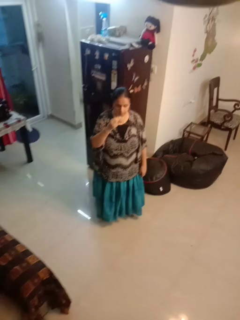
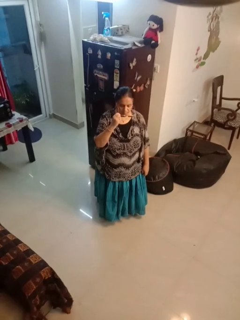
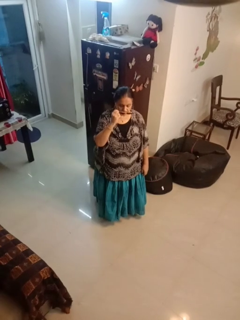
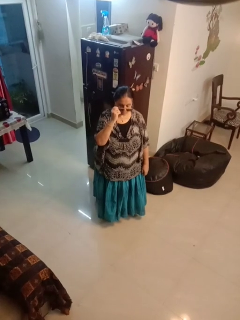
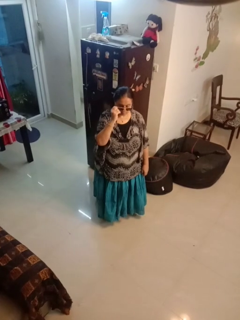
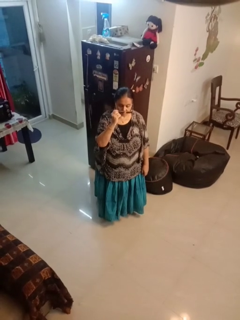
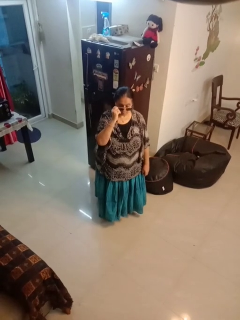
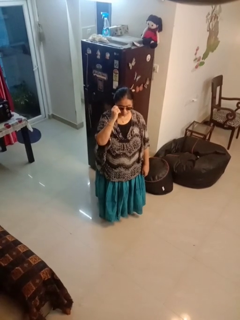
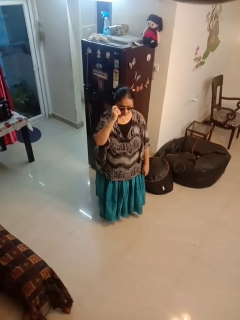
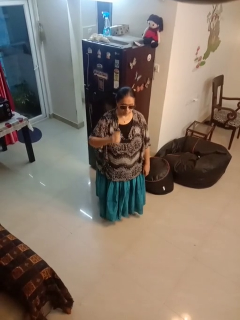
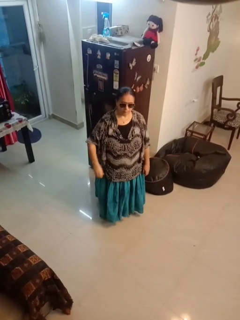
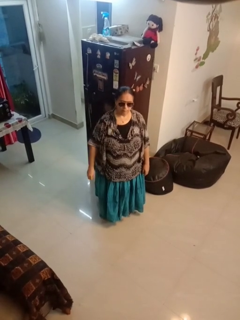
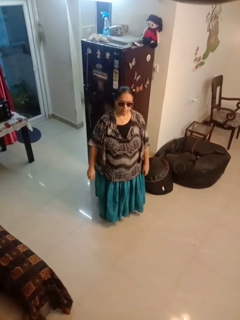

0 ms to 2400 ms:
person puts on sunglasses

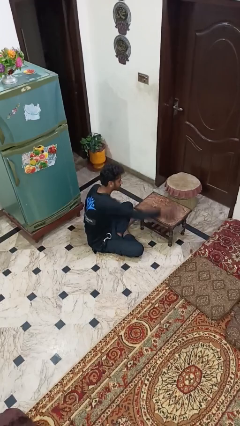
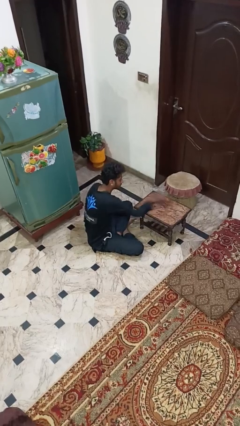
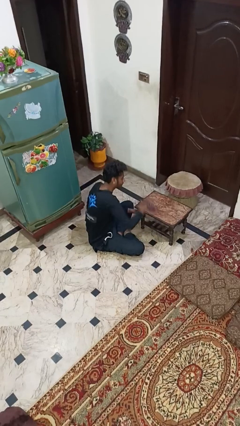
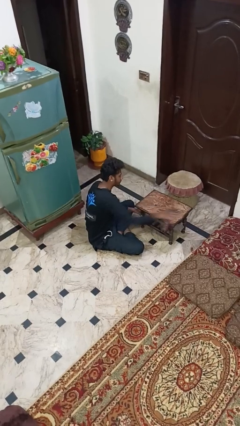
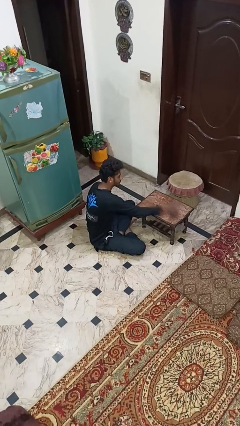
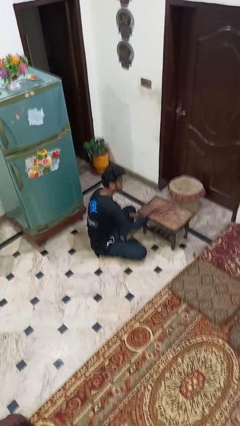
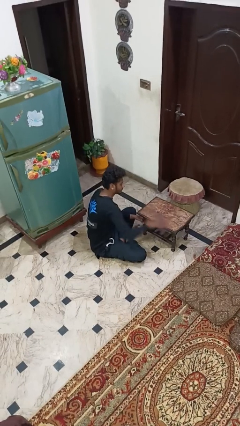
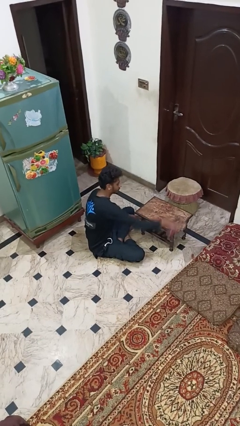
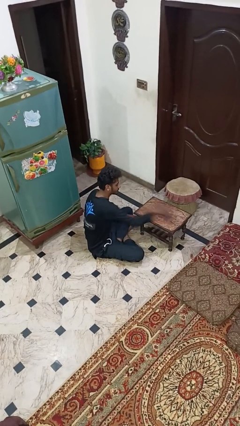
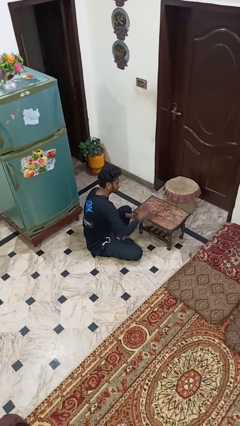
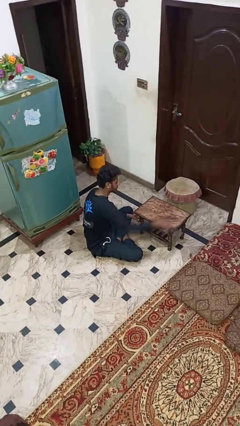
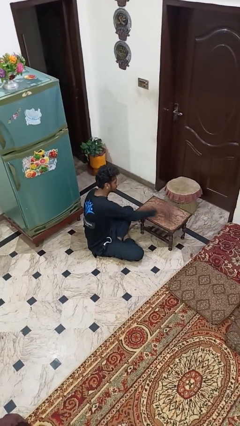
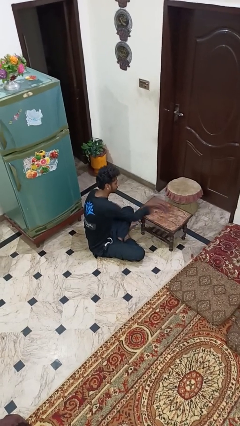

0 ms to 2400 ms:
person cleans table with rag

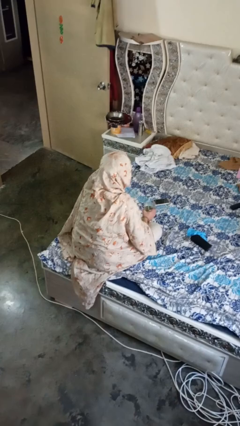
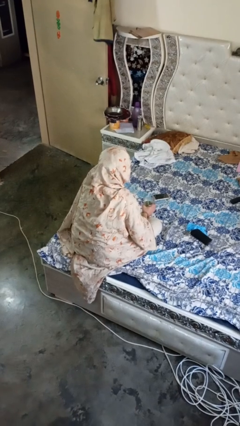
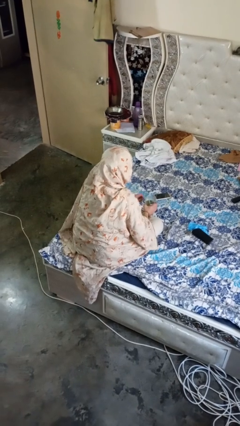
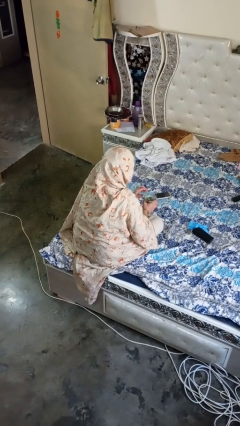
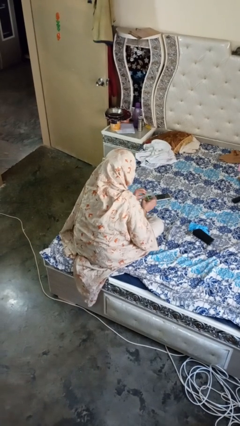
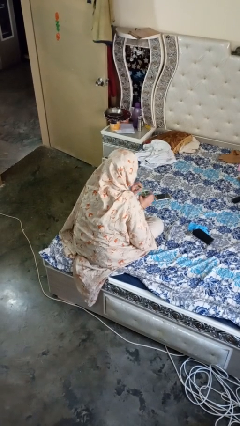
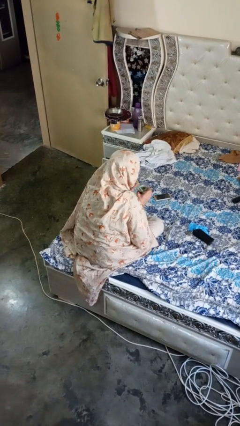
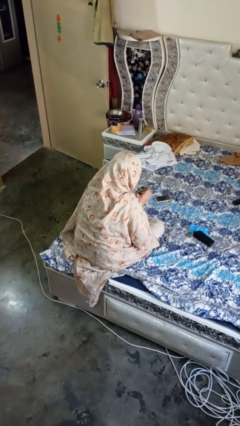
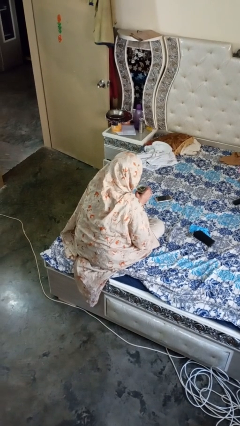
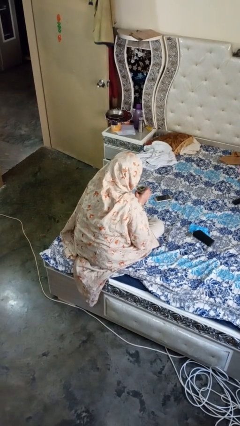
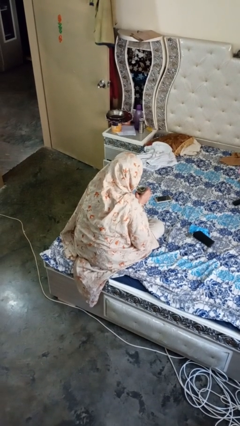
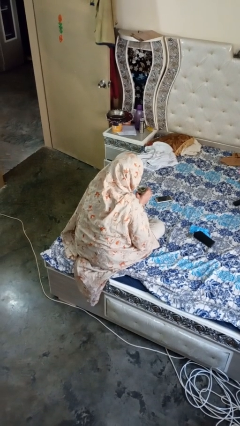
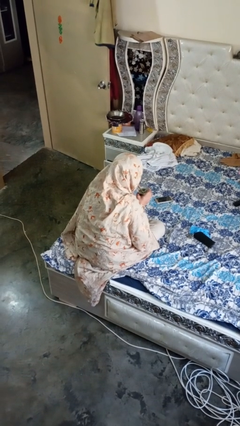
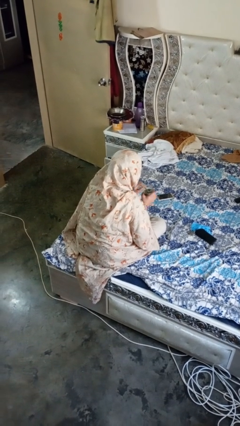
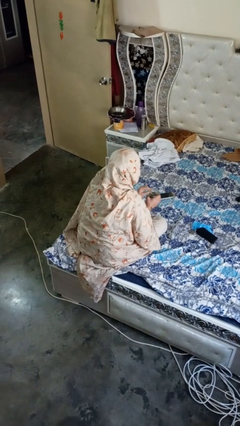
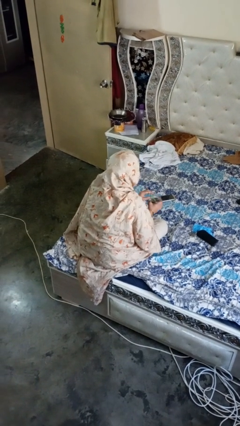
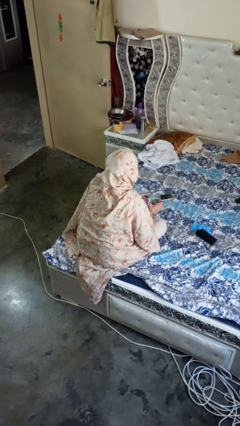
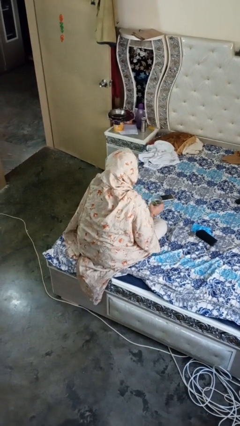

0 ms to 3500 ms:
person drinks from straw

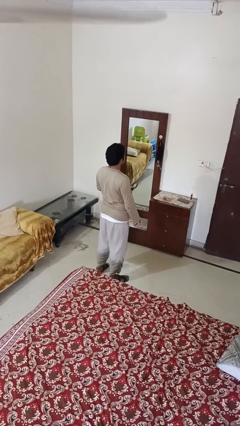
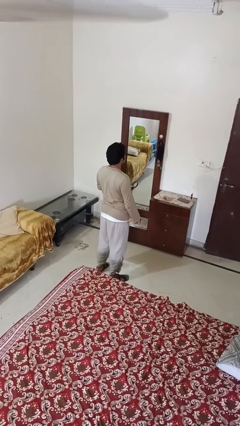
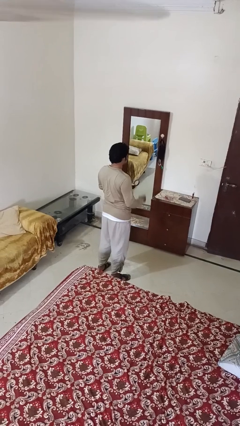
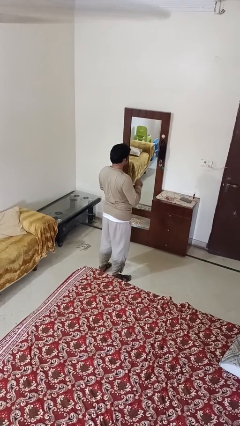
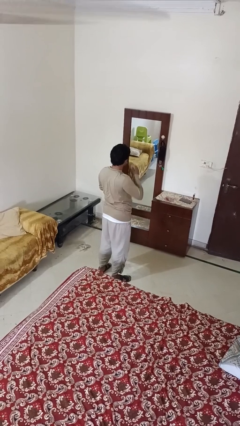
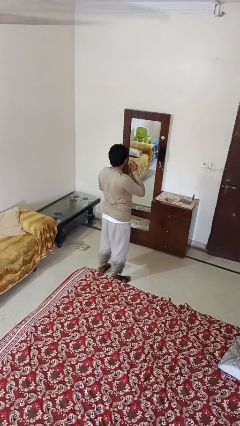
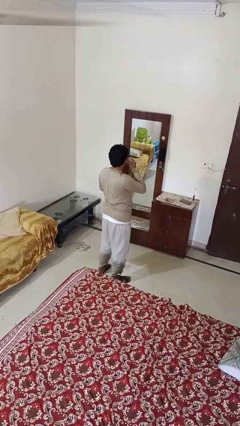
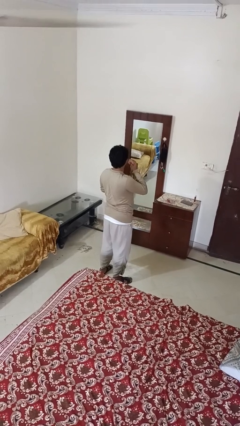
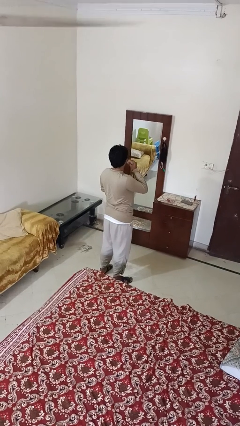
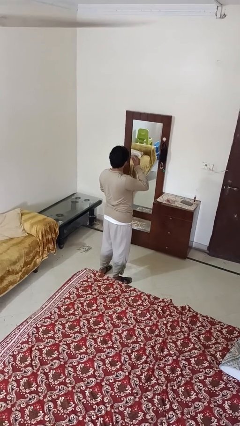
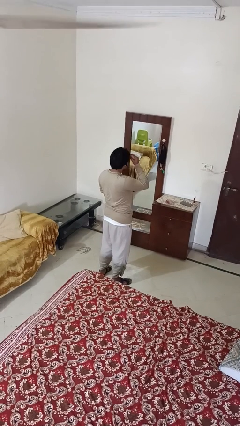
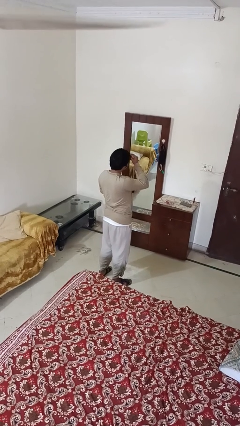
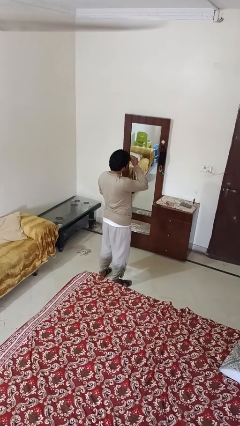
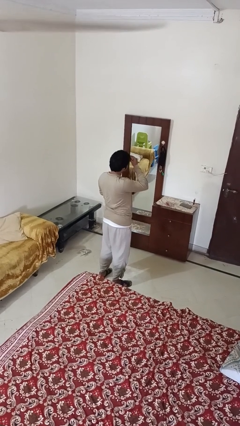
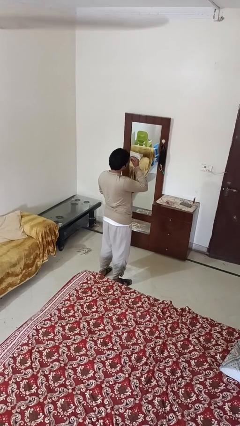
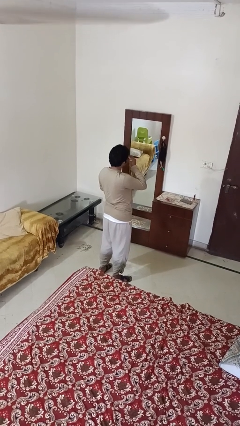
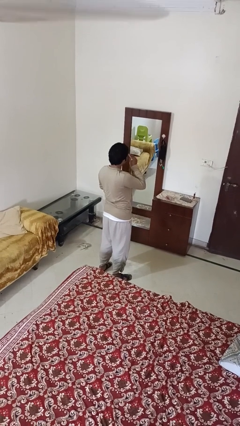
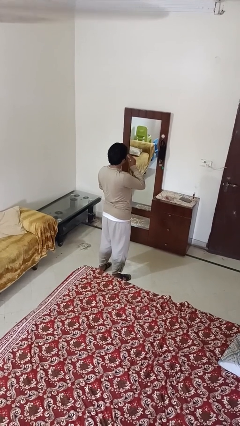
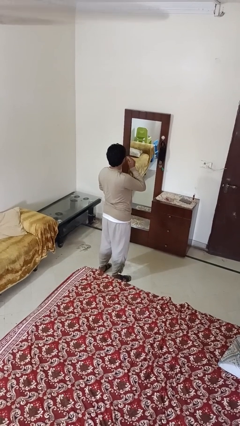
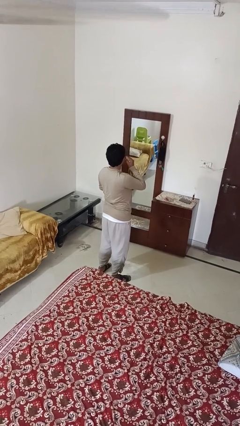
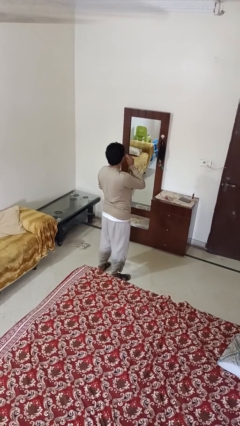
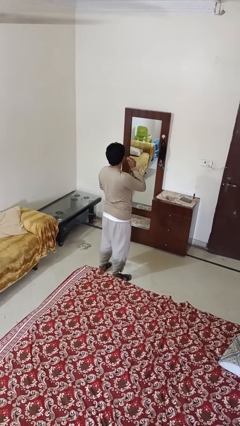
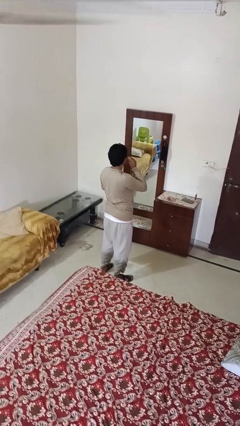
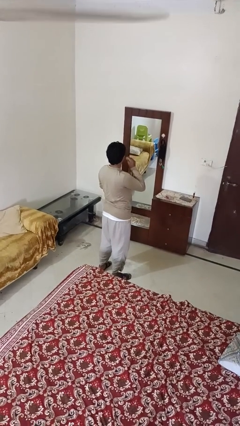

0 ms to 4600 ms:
person applies foundation makeup

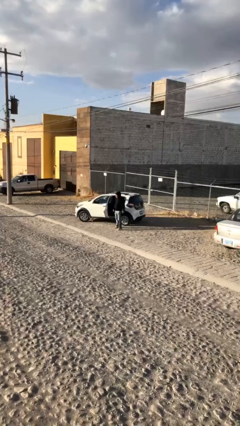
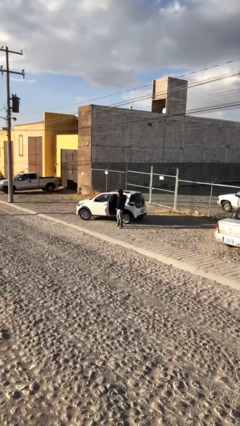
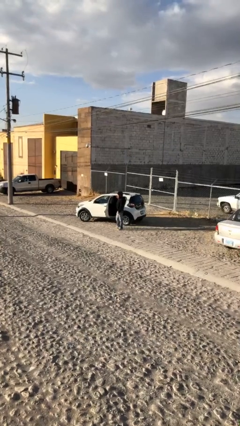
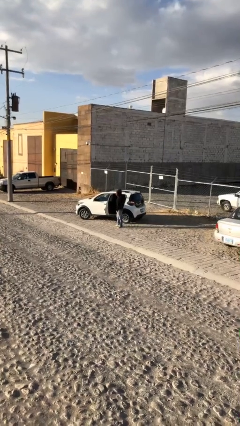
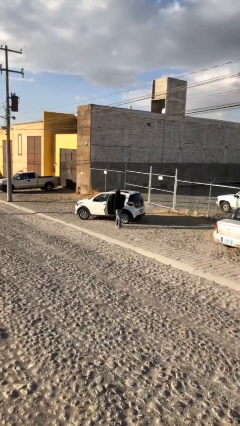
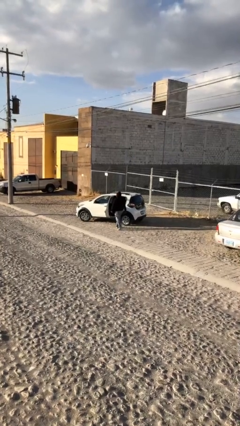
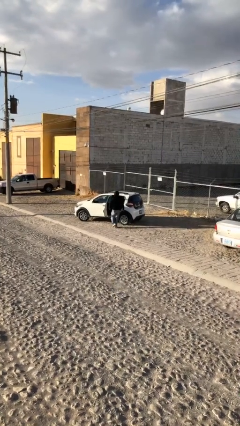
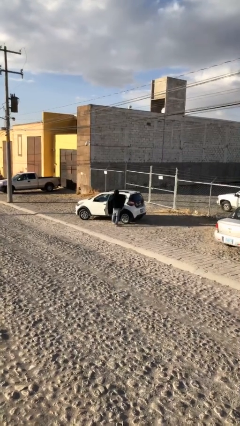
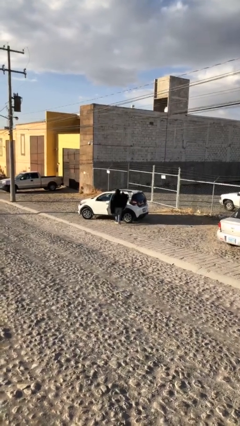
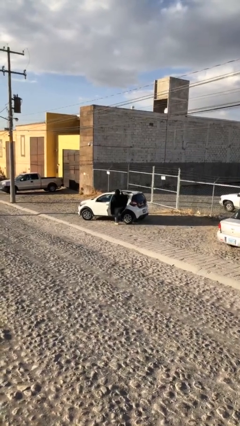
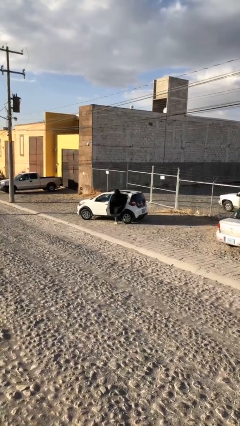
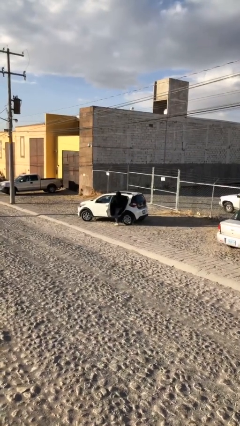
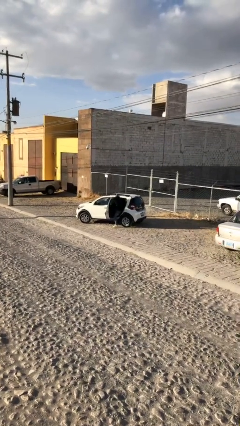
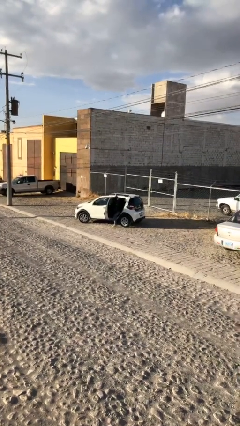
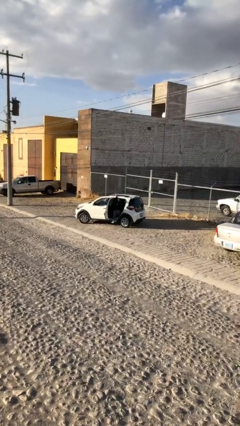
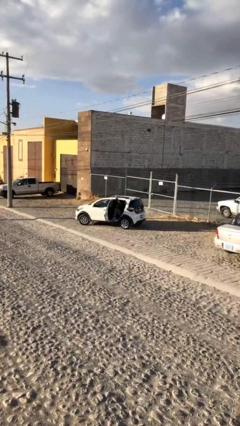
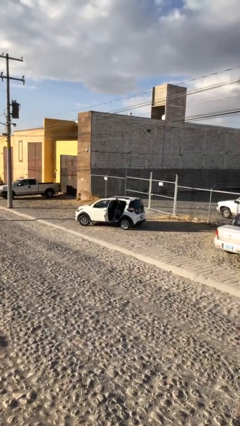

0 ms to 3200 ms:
person enters car

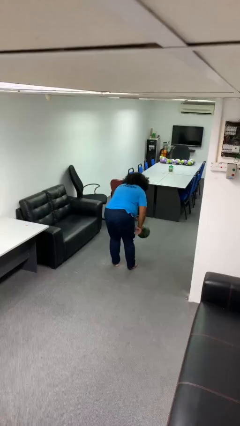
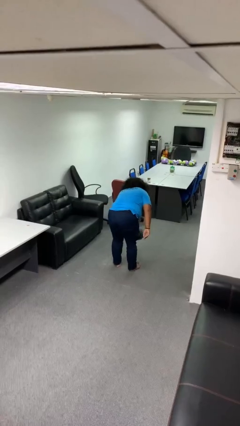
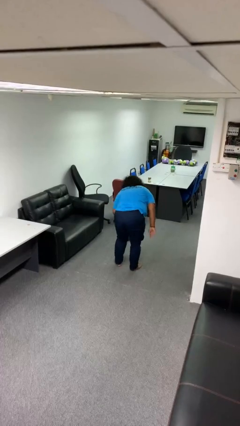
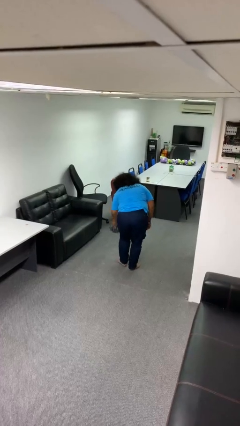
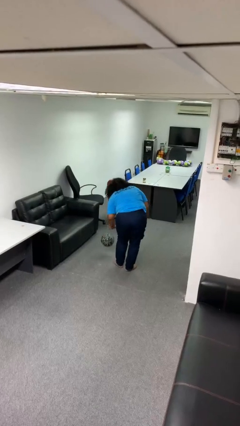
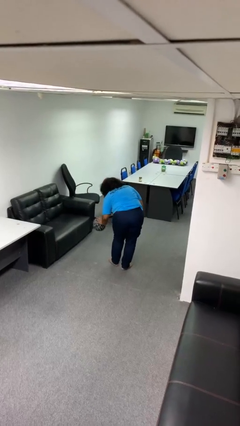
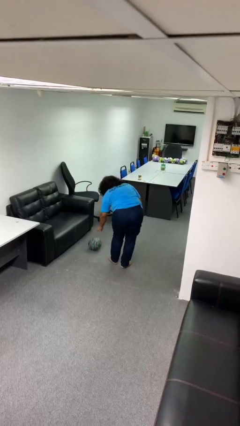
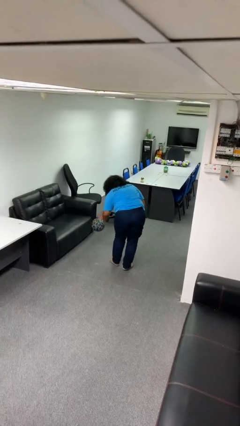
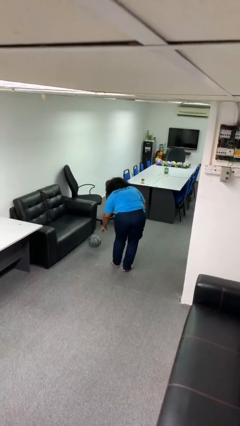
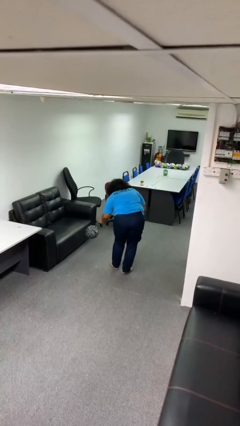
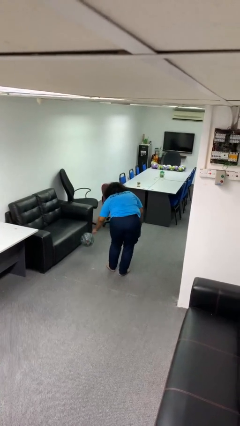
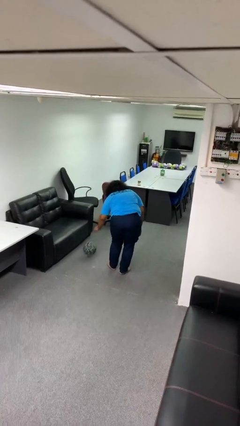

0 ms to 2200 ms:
person bounces ball on floor
